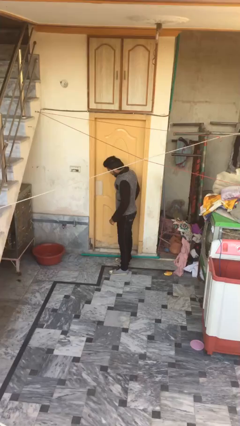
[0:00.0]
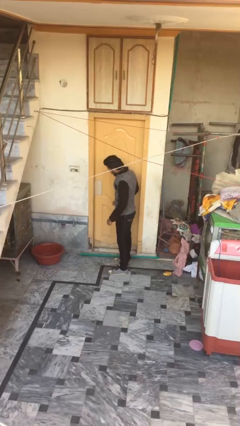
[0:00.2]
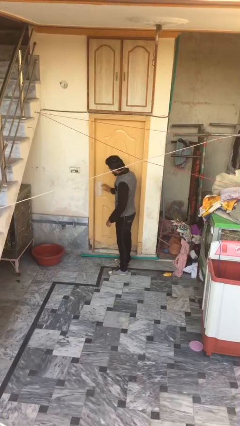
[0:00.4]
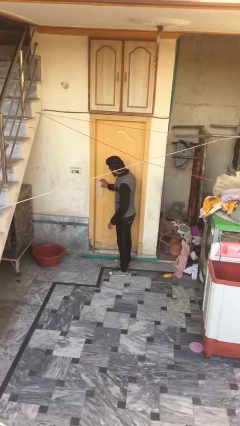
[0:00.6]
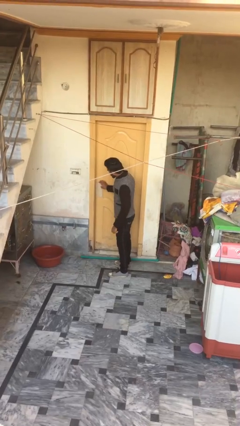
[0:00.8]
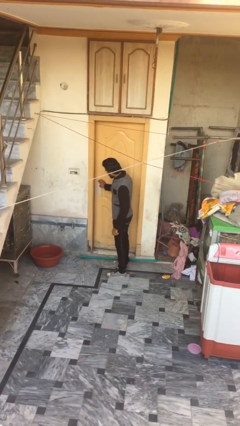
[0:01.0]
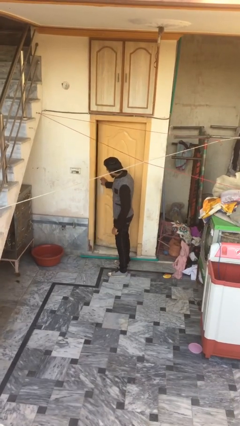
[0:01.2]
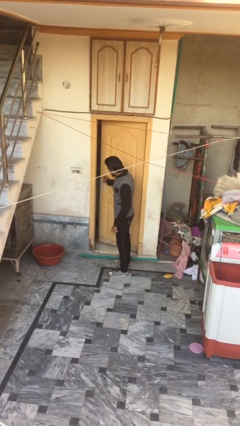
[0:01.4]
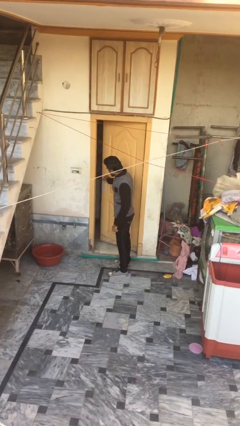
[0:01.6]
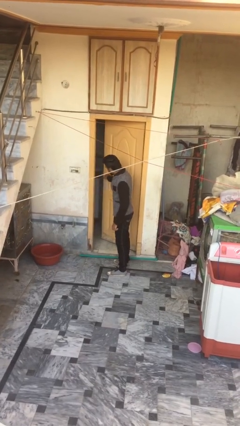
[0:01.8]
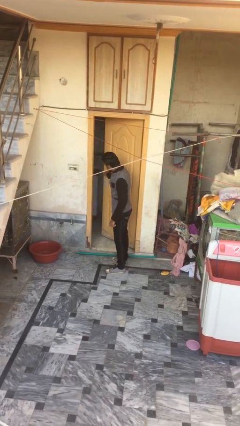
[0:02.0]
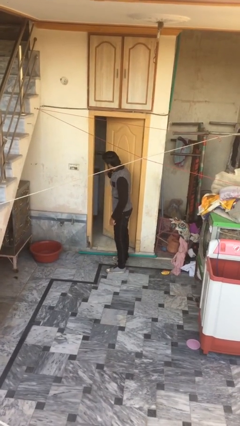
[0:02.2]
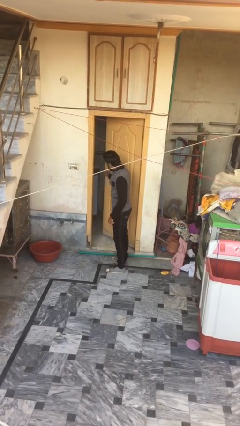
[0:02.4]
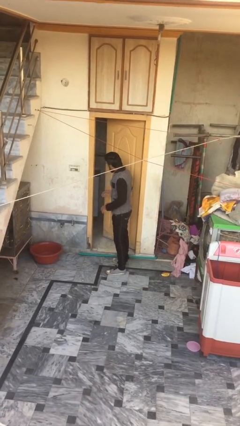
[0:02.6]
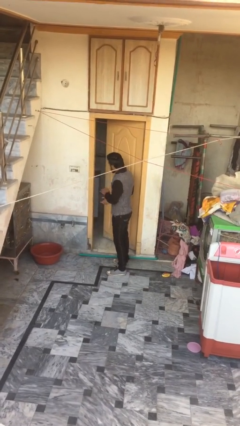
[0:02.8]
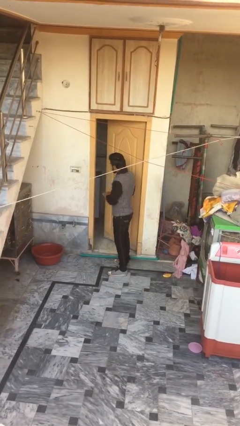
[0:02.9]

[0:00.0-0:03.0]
person opens facility door

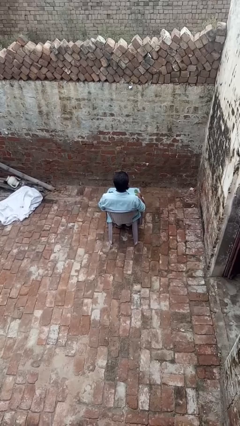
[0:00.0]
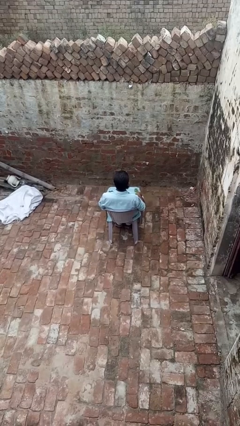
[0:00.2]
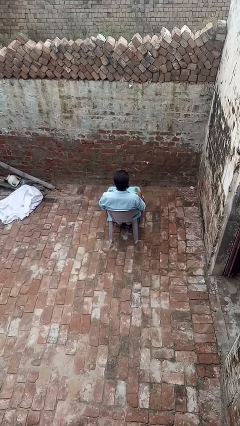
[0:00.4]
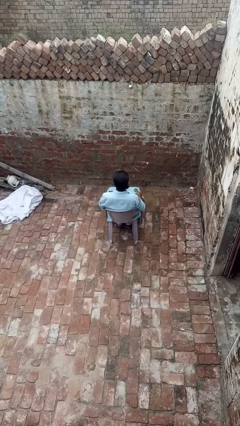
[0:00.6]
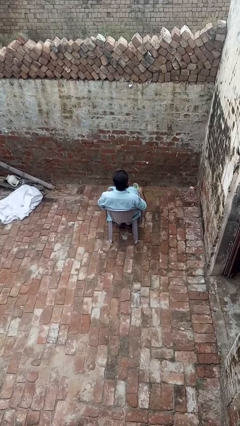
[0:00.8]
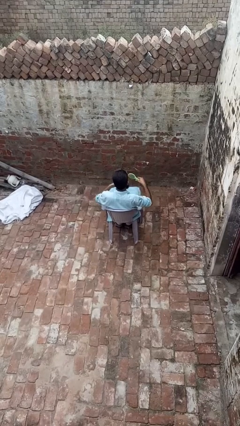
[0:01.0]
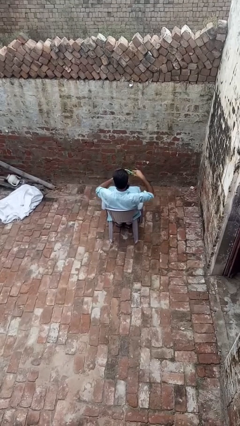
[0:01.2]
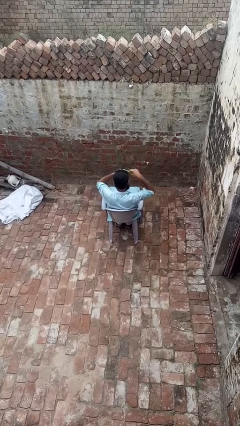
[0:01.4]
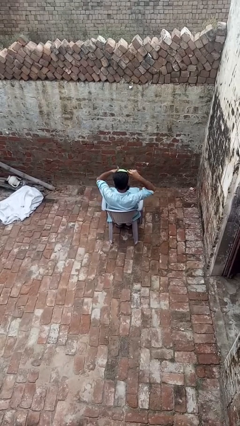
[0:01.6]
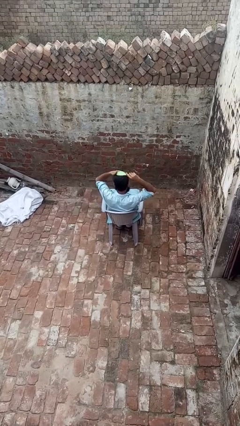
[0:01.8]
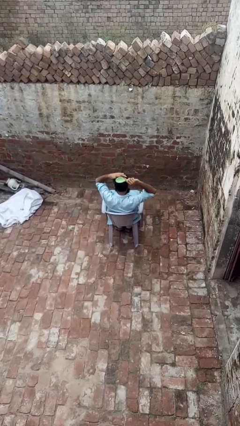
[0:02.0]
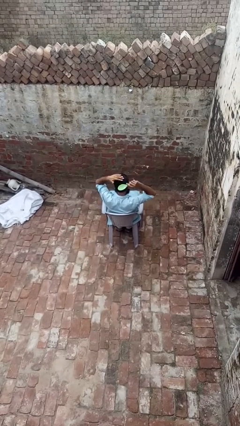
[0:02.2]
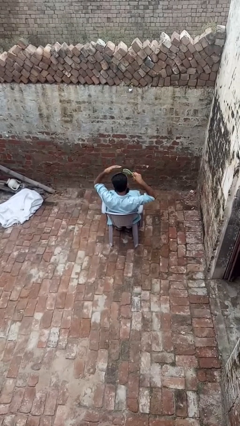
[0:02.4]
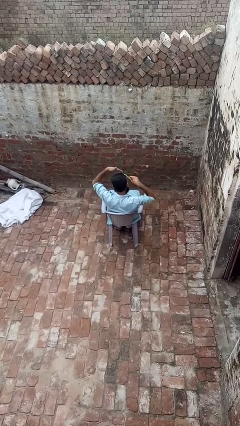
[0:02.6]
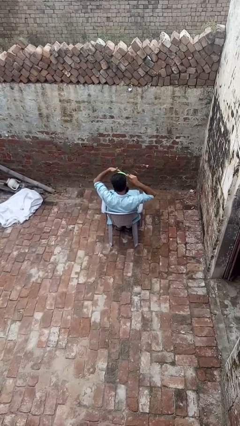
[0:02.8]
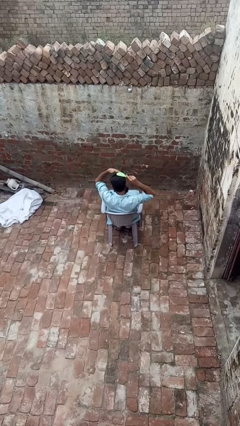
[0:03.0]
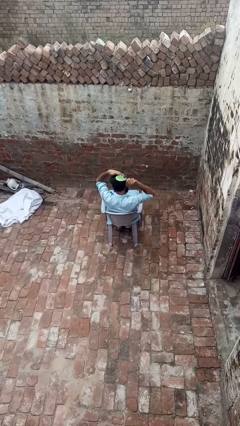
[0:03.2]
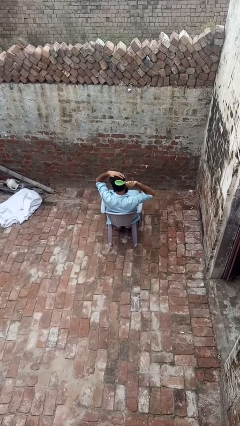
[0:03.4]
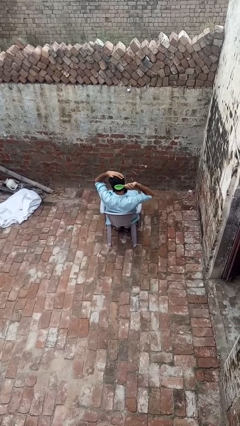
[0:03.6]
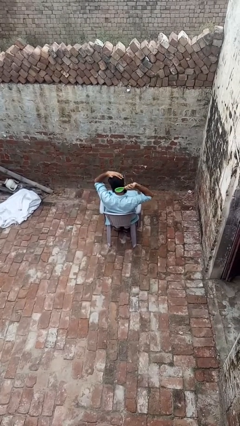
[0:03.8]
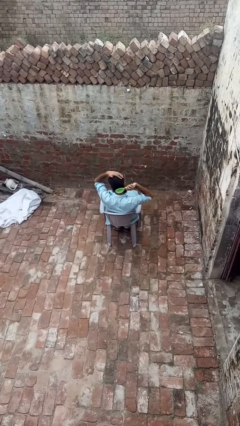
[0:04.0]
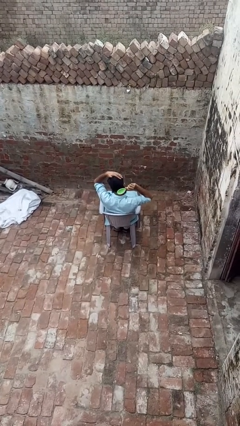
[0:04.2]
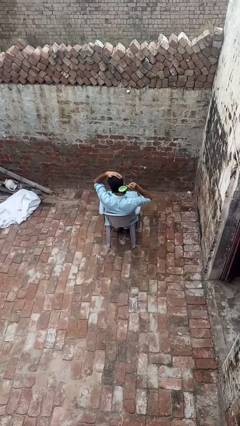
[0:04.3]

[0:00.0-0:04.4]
person brushes hair

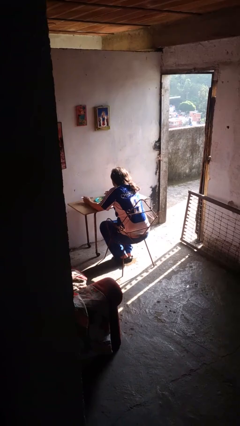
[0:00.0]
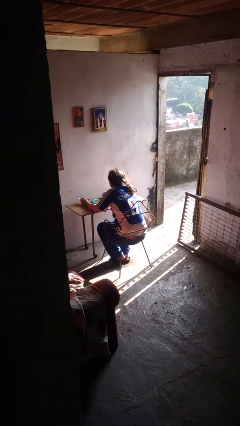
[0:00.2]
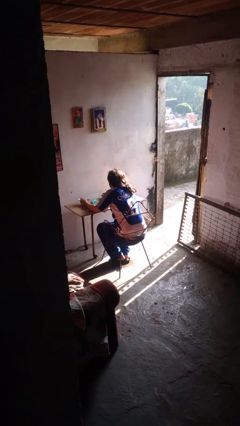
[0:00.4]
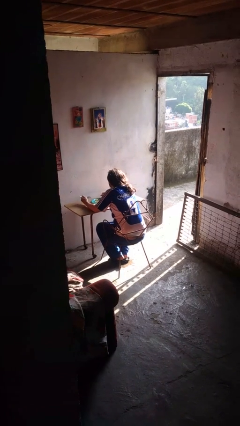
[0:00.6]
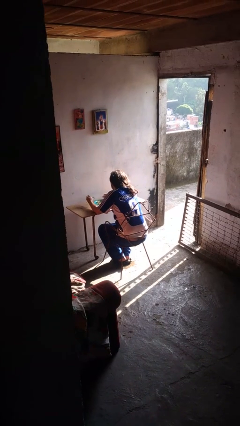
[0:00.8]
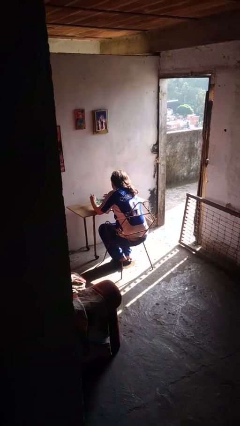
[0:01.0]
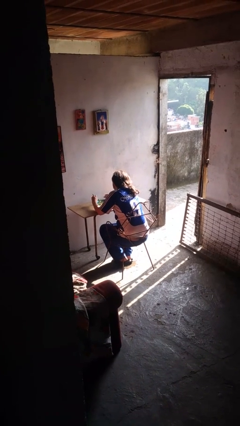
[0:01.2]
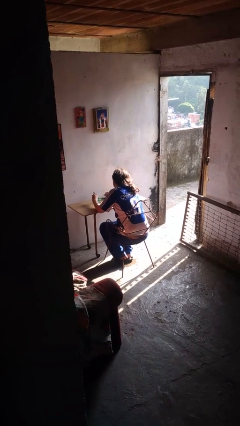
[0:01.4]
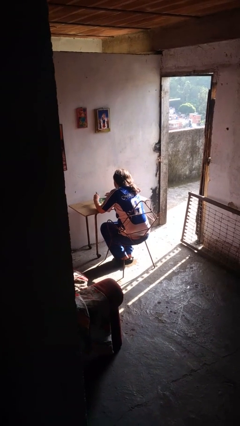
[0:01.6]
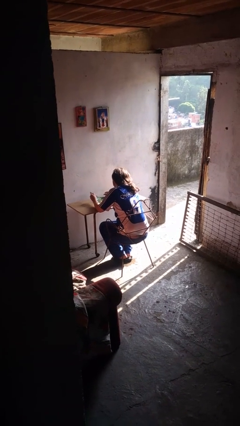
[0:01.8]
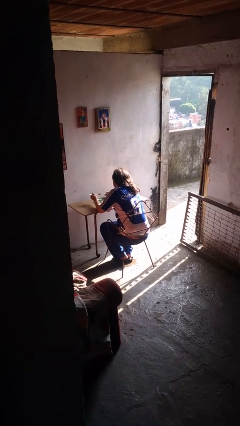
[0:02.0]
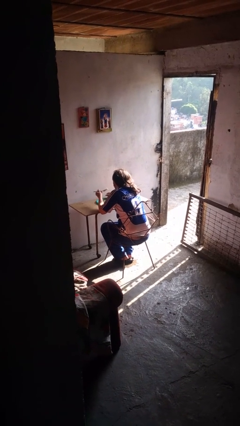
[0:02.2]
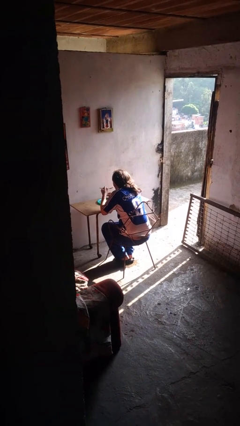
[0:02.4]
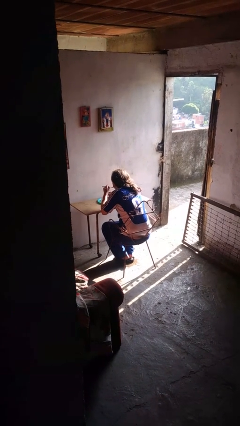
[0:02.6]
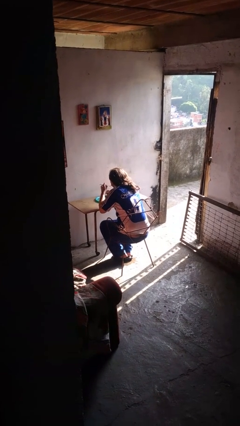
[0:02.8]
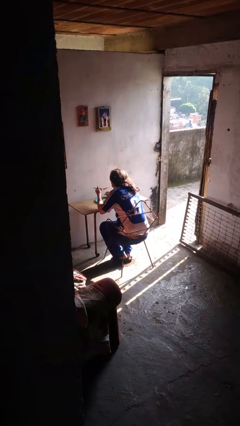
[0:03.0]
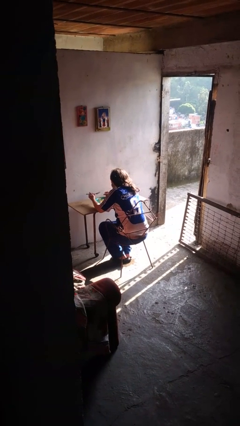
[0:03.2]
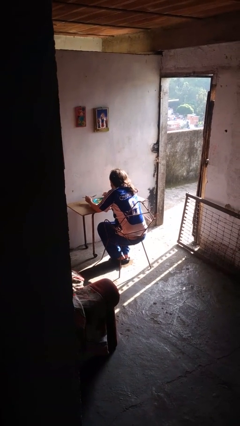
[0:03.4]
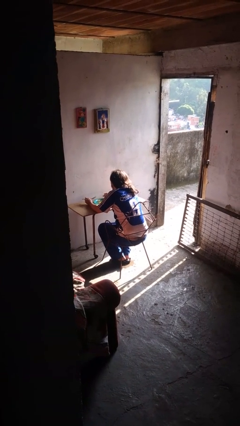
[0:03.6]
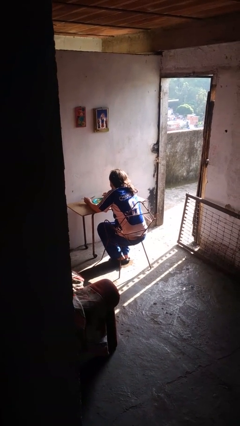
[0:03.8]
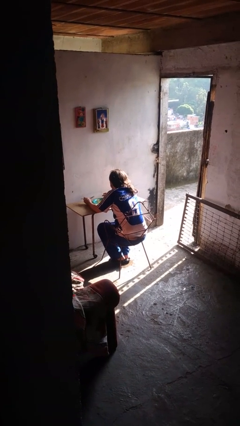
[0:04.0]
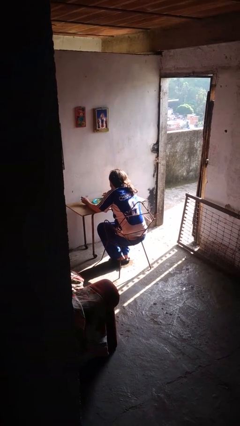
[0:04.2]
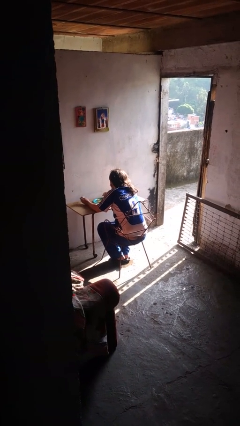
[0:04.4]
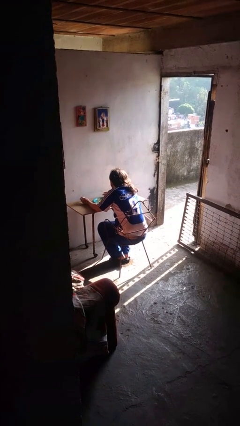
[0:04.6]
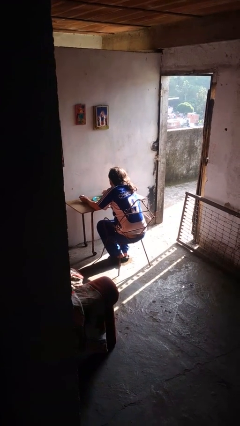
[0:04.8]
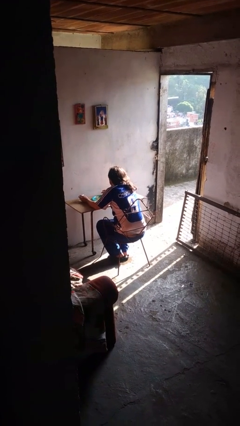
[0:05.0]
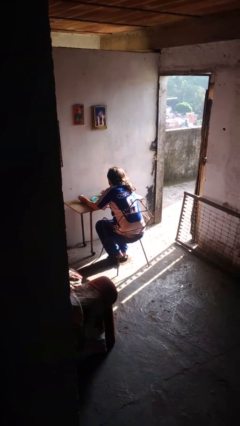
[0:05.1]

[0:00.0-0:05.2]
person eats with utensil

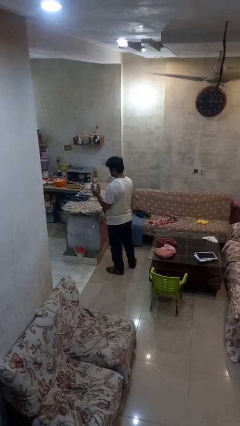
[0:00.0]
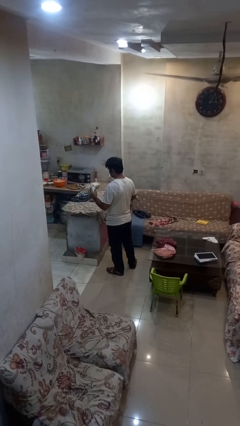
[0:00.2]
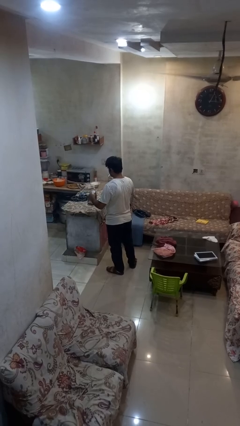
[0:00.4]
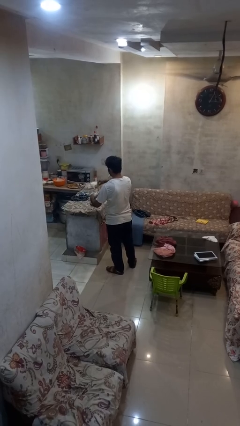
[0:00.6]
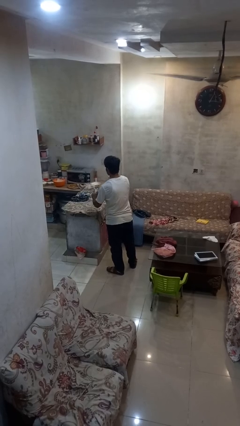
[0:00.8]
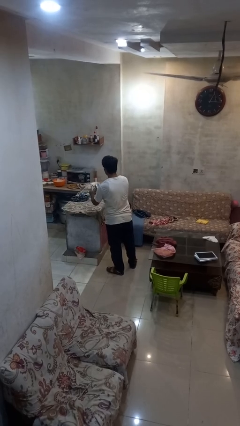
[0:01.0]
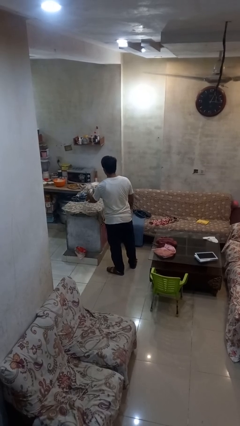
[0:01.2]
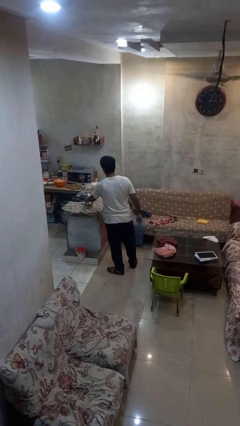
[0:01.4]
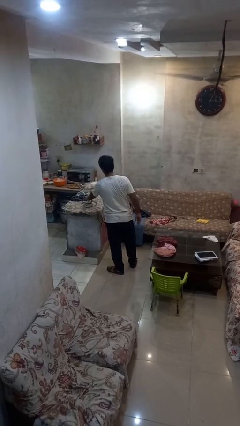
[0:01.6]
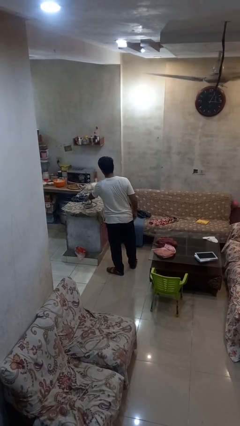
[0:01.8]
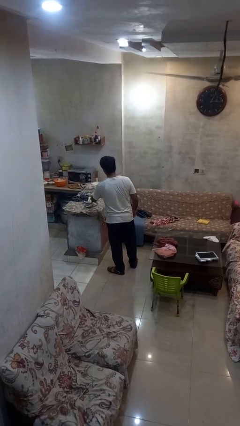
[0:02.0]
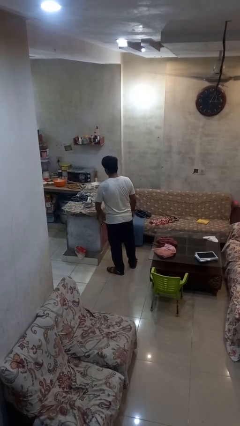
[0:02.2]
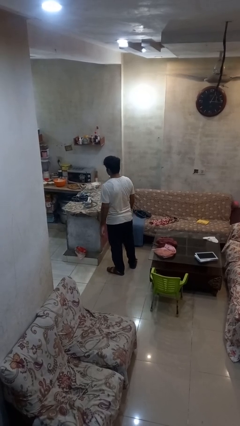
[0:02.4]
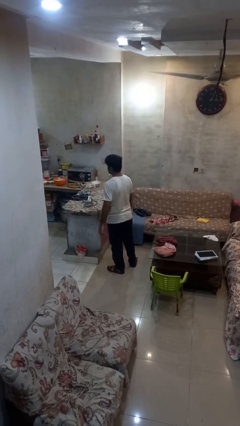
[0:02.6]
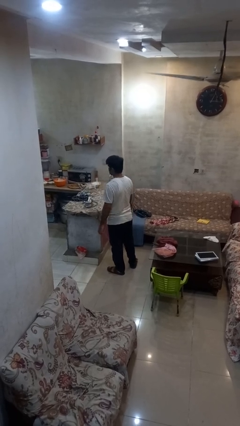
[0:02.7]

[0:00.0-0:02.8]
person puts down object on countertop

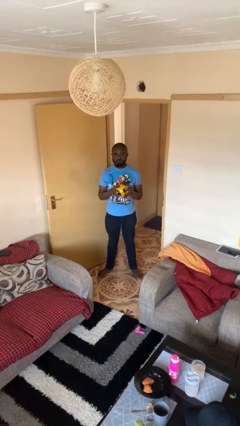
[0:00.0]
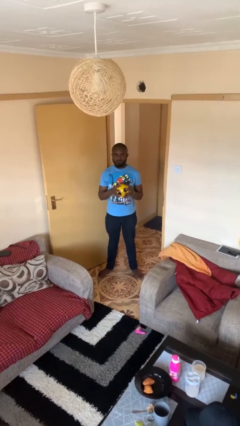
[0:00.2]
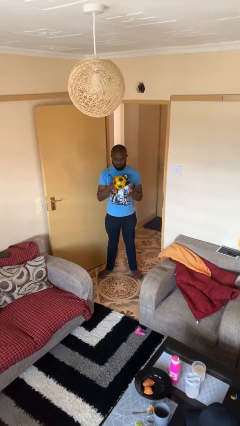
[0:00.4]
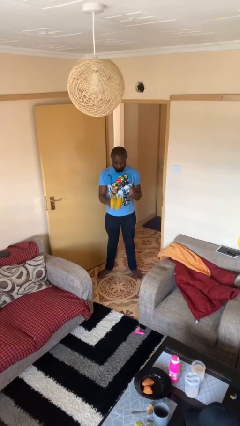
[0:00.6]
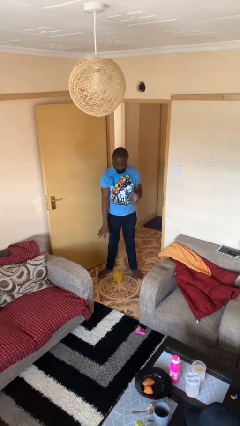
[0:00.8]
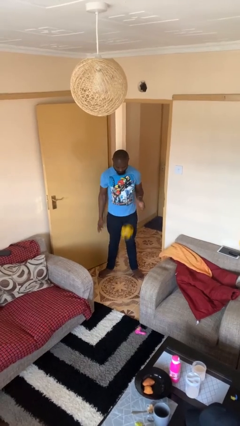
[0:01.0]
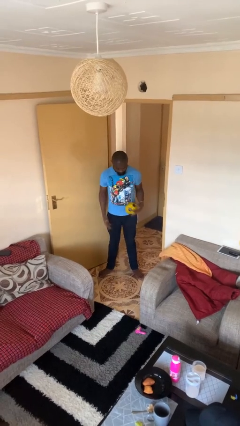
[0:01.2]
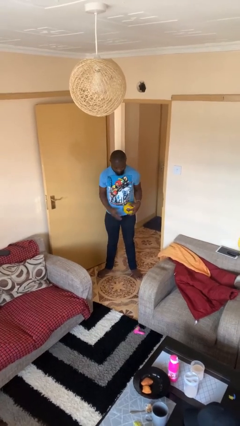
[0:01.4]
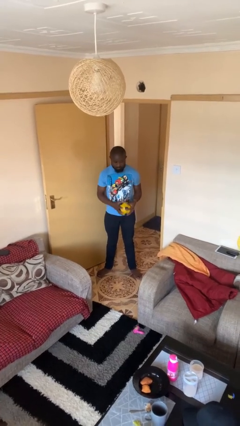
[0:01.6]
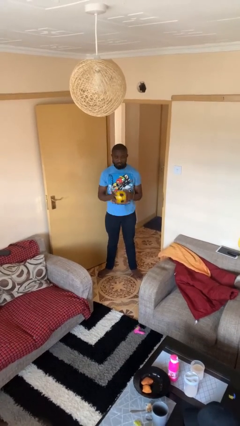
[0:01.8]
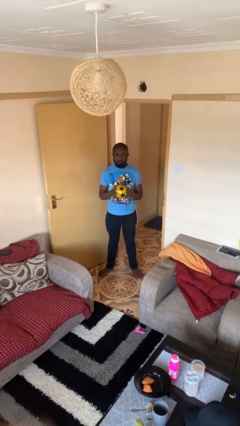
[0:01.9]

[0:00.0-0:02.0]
person bounces ball on floor

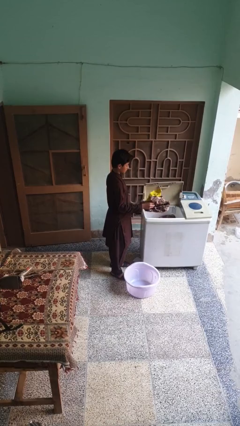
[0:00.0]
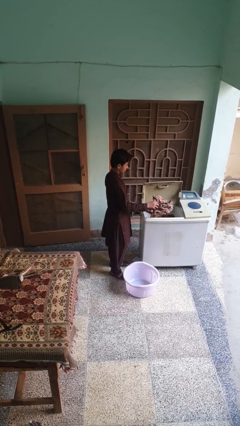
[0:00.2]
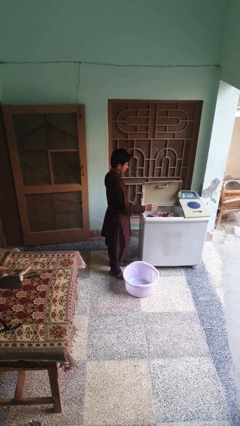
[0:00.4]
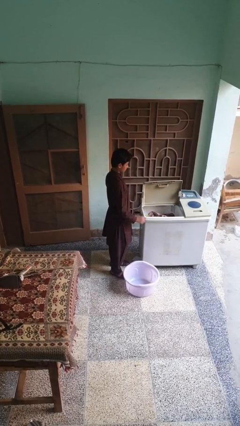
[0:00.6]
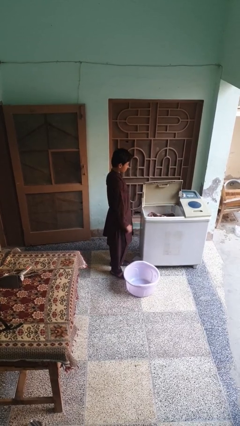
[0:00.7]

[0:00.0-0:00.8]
person unloads clotheswasher
